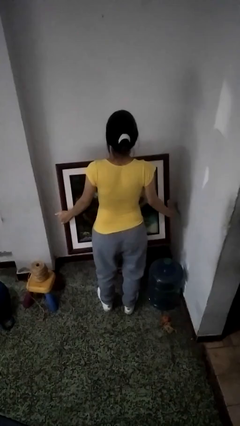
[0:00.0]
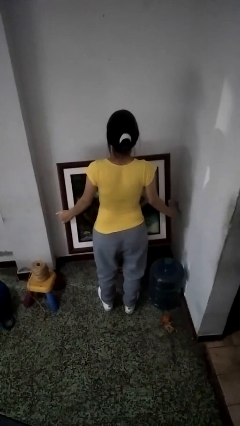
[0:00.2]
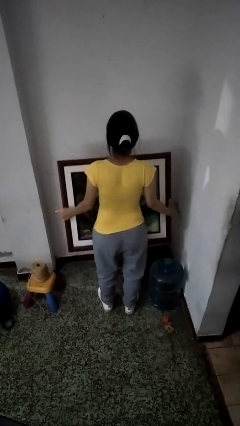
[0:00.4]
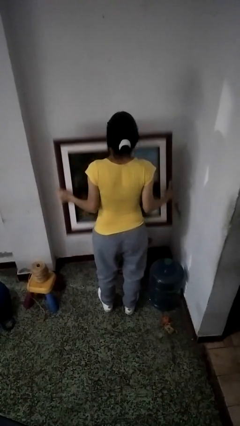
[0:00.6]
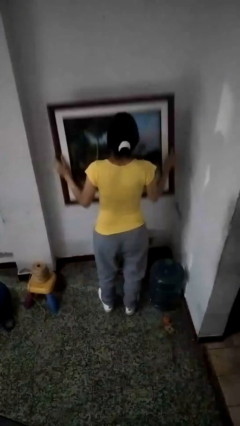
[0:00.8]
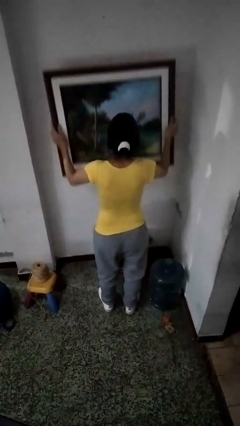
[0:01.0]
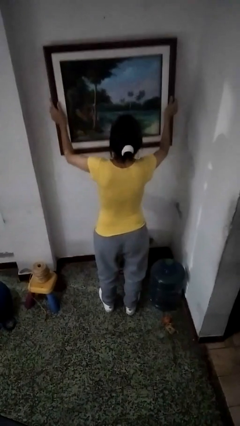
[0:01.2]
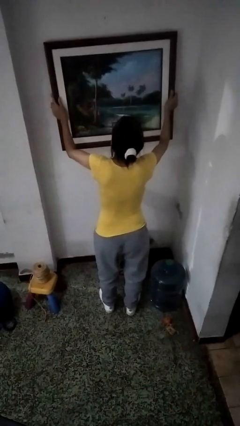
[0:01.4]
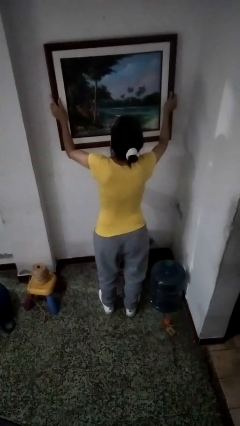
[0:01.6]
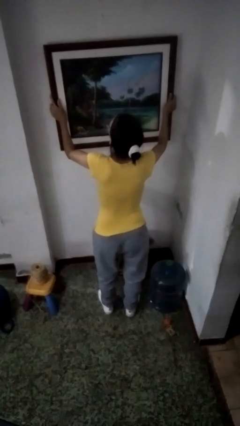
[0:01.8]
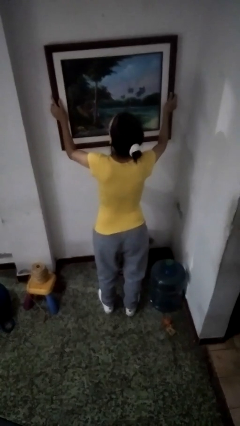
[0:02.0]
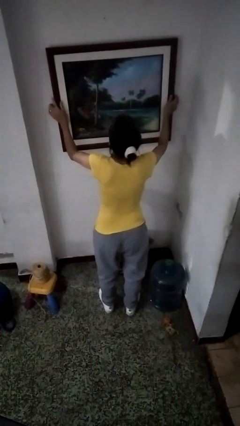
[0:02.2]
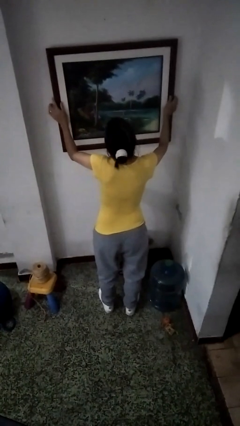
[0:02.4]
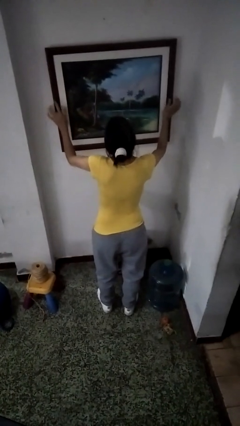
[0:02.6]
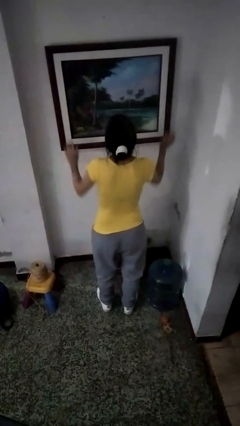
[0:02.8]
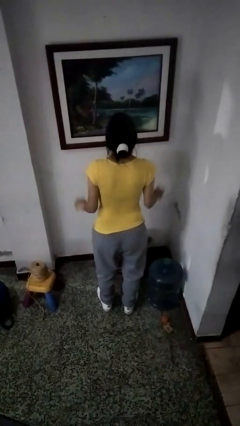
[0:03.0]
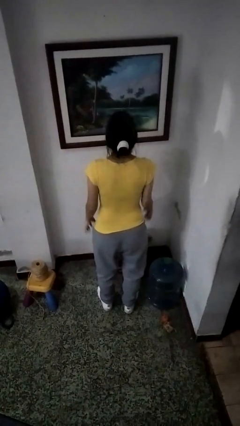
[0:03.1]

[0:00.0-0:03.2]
person puts up picture frame

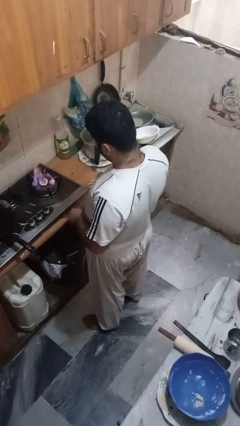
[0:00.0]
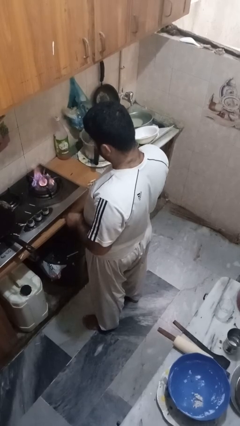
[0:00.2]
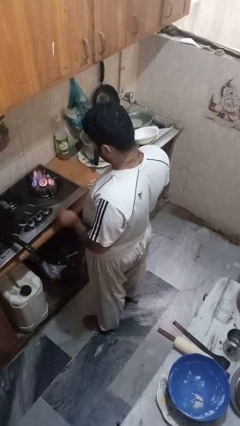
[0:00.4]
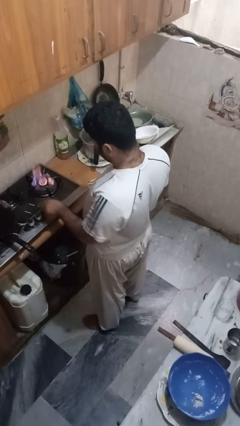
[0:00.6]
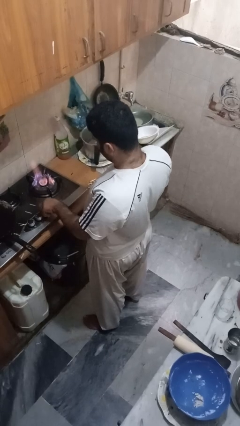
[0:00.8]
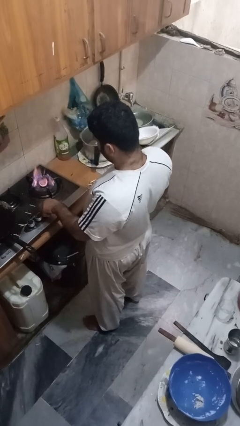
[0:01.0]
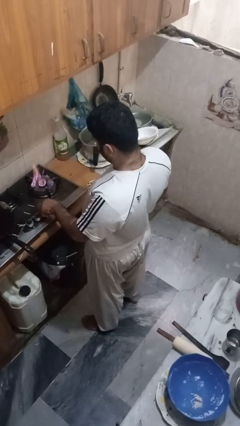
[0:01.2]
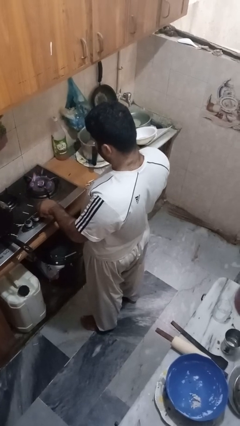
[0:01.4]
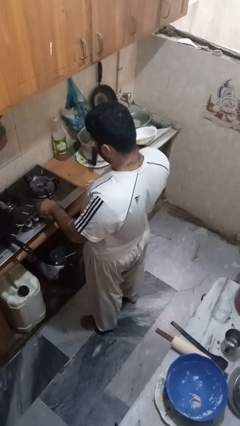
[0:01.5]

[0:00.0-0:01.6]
person turns off stovetop

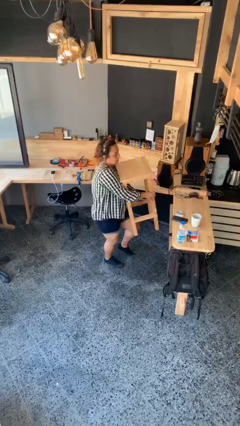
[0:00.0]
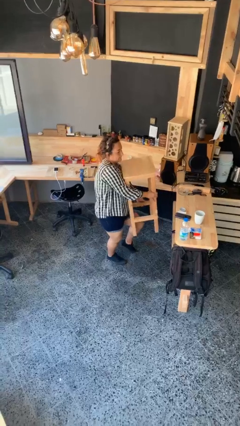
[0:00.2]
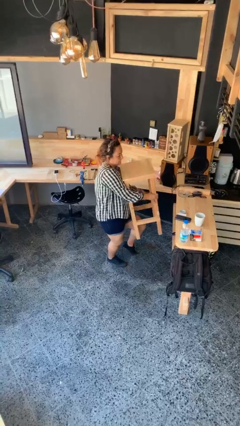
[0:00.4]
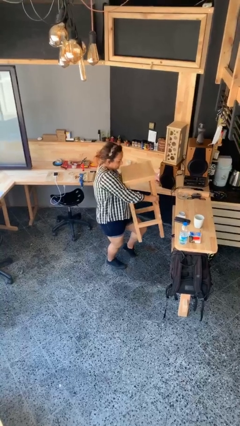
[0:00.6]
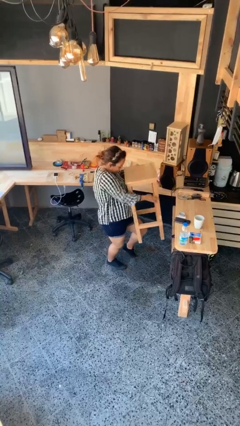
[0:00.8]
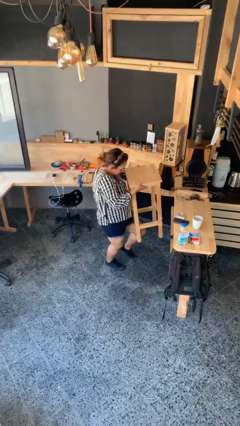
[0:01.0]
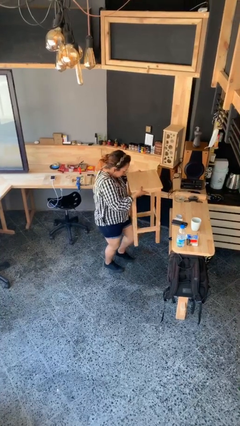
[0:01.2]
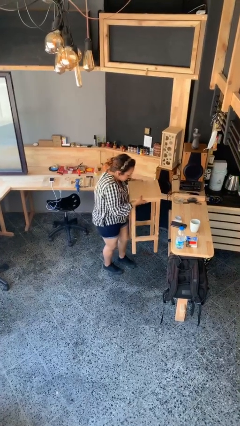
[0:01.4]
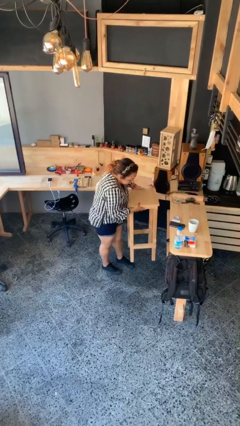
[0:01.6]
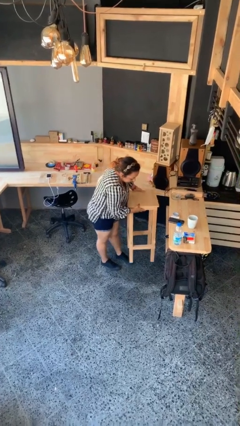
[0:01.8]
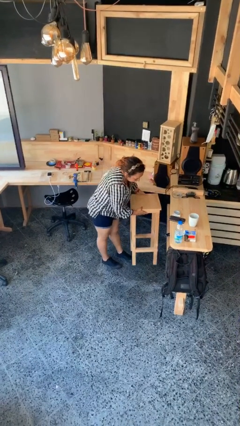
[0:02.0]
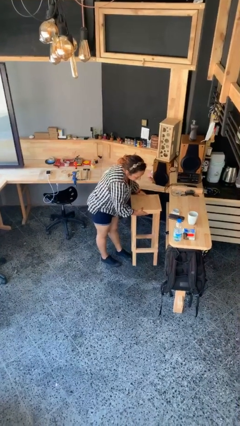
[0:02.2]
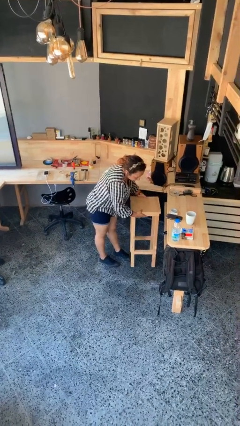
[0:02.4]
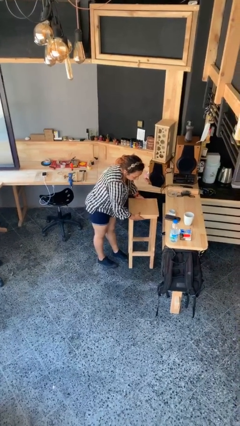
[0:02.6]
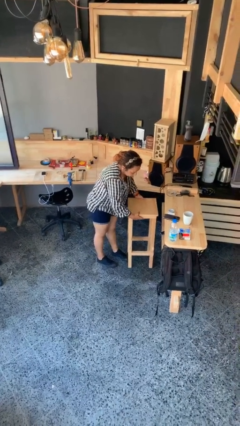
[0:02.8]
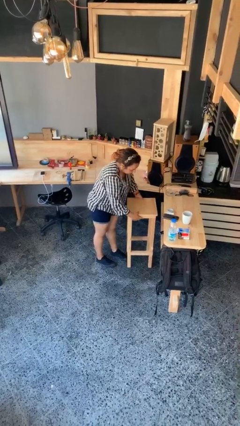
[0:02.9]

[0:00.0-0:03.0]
person puts down object on floor

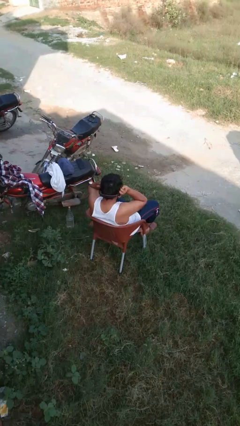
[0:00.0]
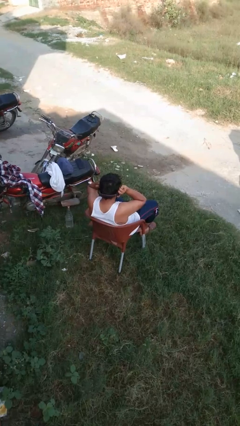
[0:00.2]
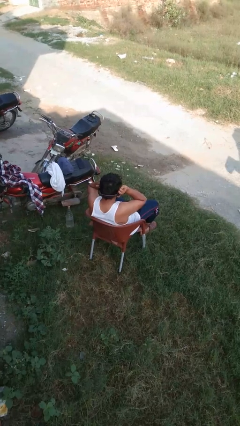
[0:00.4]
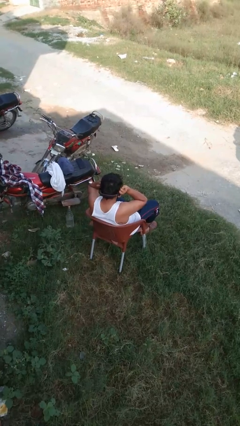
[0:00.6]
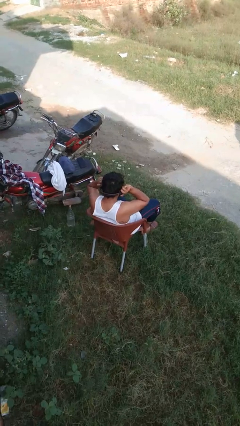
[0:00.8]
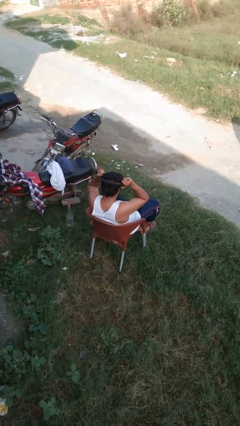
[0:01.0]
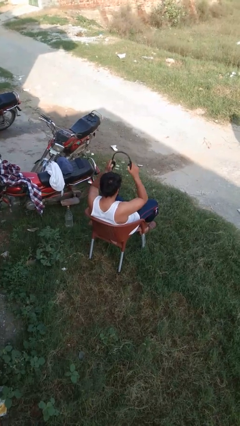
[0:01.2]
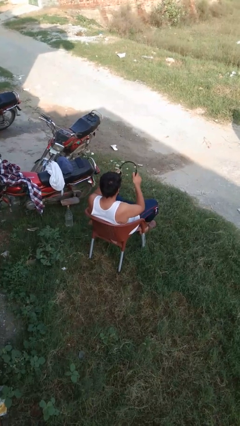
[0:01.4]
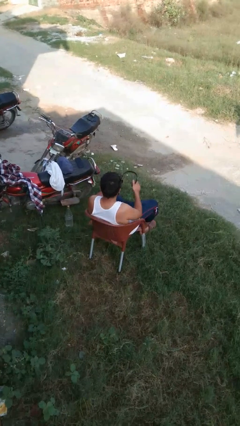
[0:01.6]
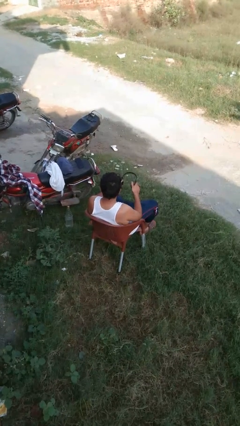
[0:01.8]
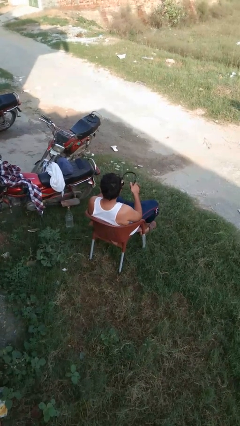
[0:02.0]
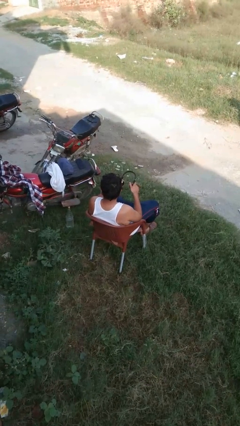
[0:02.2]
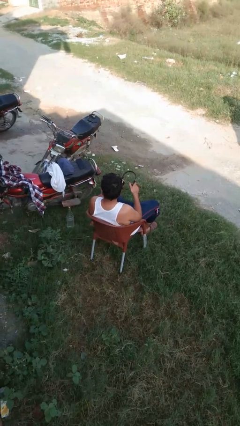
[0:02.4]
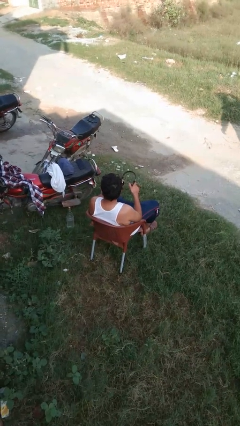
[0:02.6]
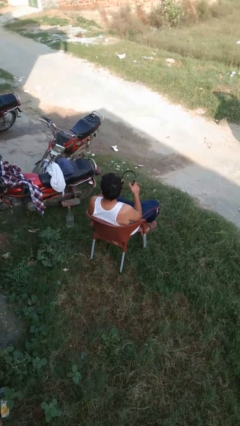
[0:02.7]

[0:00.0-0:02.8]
person takes off headphones

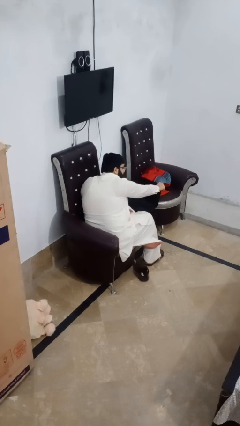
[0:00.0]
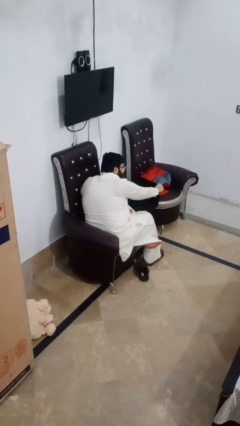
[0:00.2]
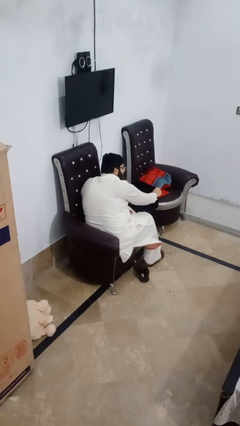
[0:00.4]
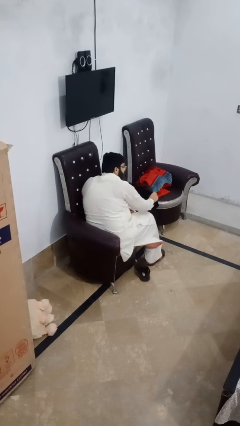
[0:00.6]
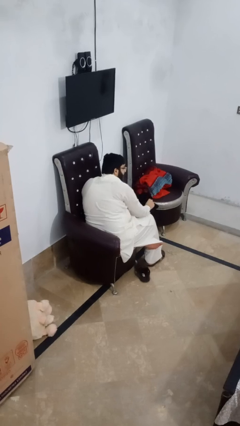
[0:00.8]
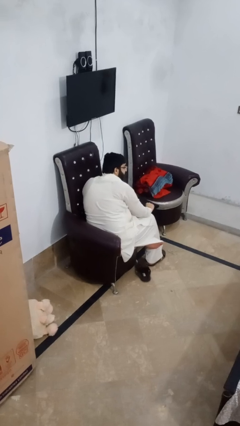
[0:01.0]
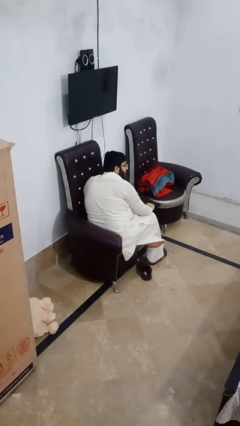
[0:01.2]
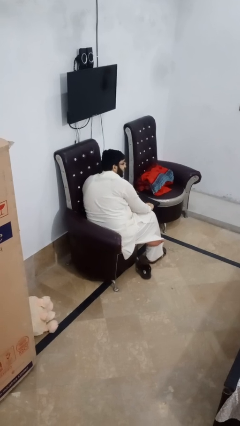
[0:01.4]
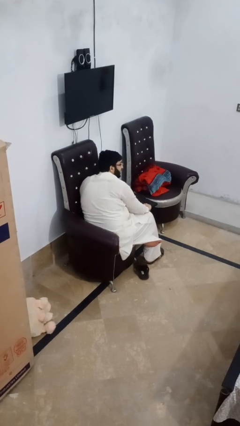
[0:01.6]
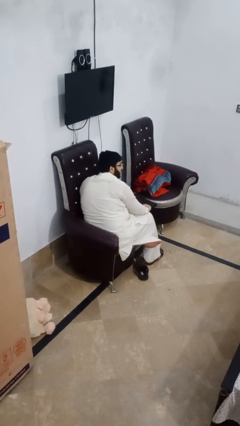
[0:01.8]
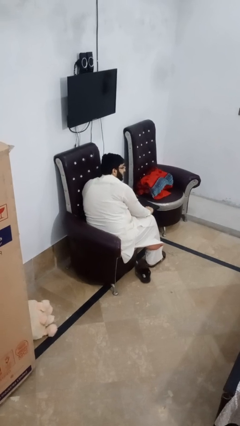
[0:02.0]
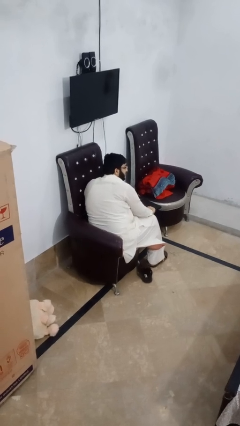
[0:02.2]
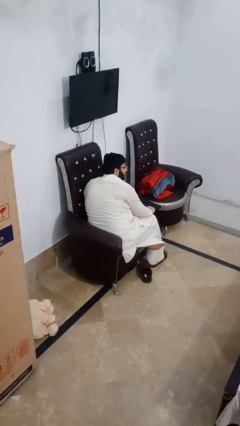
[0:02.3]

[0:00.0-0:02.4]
person closes laptop

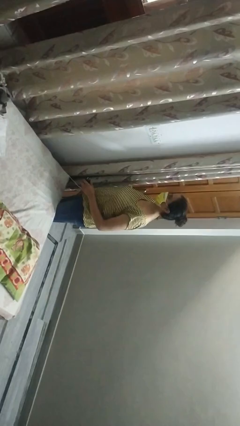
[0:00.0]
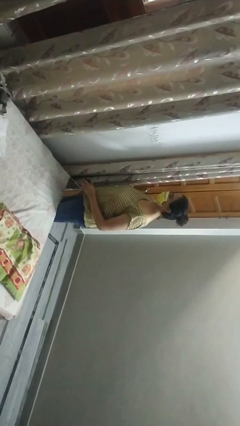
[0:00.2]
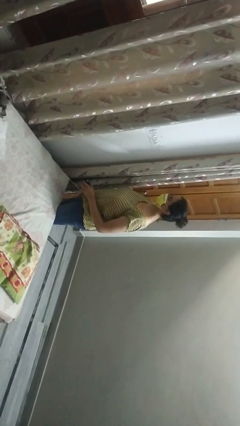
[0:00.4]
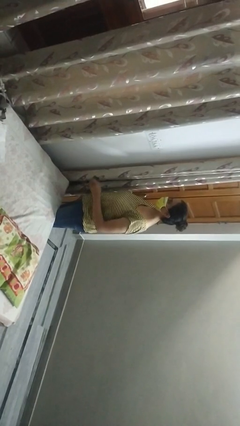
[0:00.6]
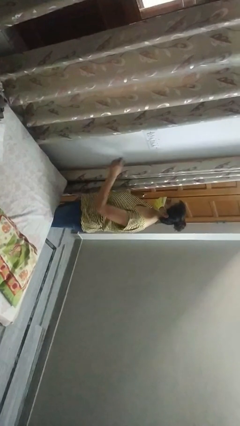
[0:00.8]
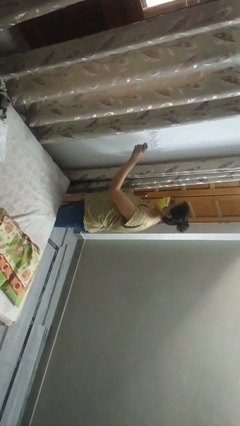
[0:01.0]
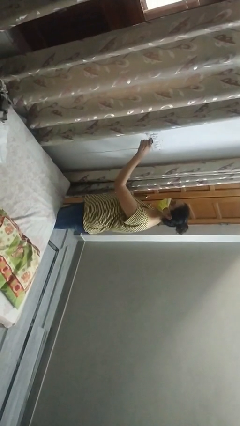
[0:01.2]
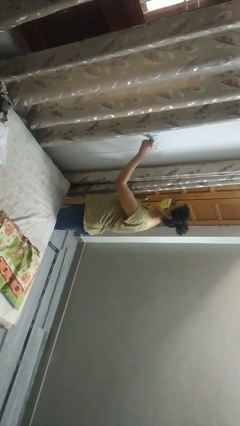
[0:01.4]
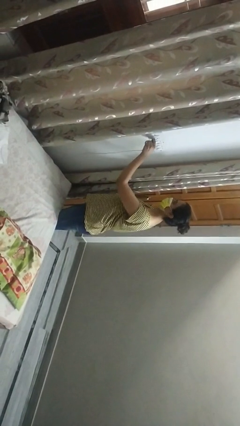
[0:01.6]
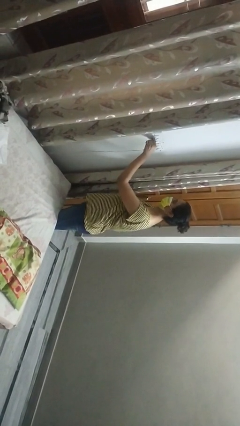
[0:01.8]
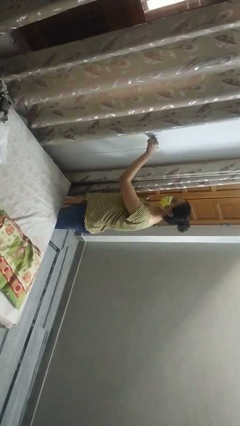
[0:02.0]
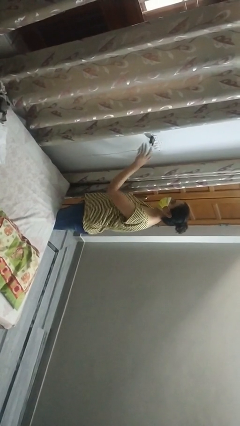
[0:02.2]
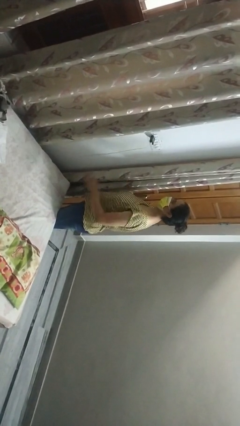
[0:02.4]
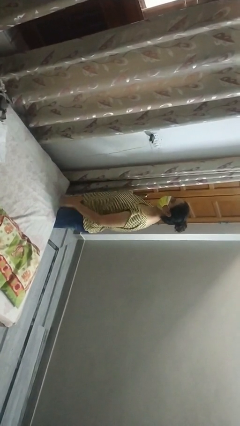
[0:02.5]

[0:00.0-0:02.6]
person plugs into electrical socket

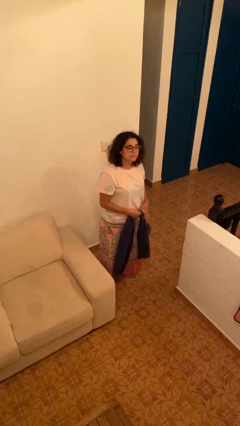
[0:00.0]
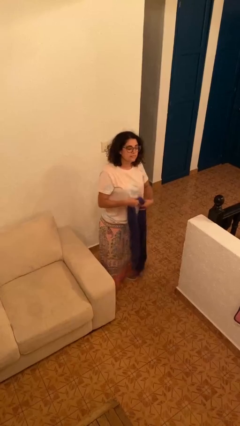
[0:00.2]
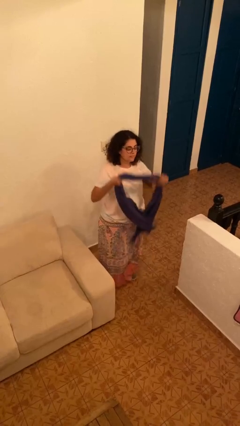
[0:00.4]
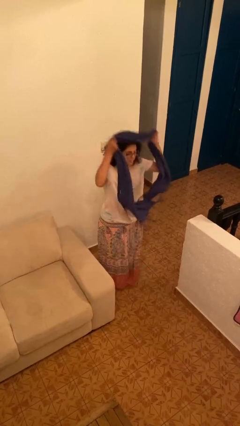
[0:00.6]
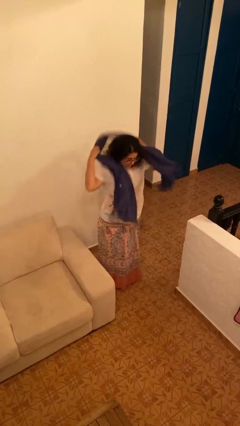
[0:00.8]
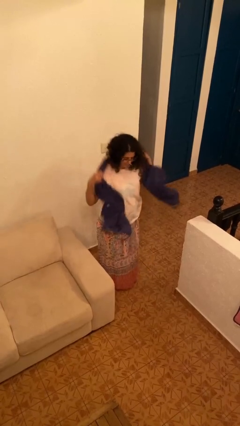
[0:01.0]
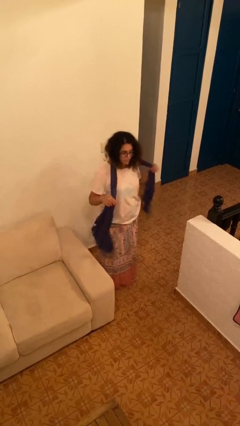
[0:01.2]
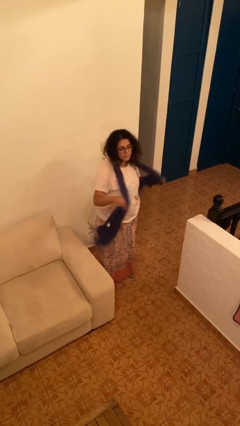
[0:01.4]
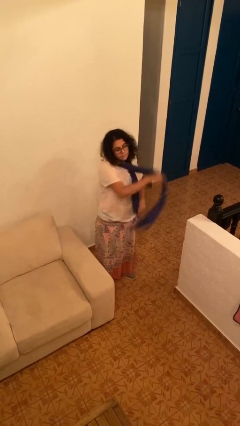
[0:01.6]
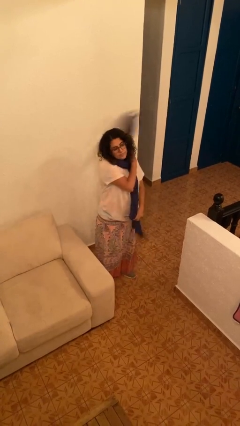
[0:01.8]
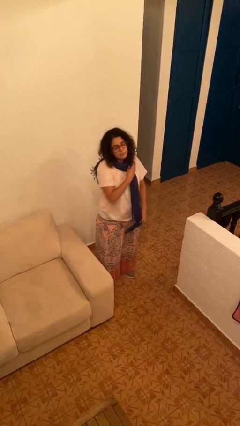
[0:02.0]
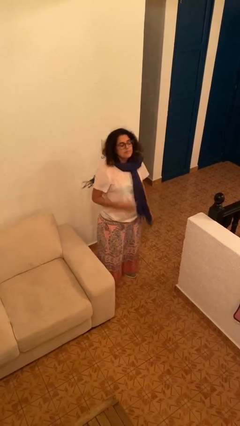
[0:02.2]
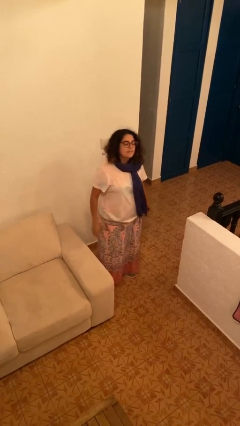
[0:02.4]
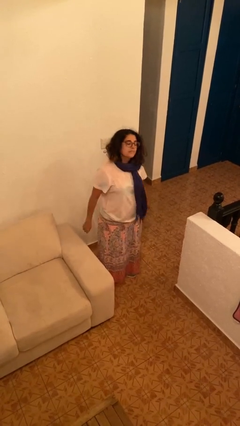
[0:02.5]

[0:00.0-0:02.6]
person puts on scarf
